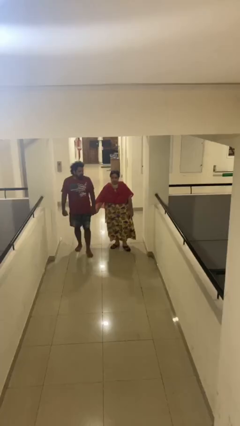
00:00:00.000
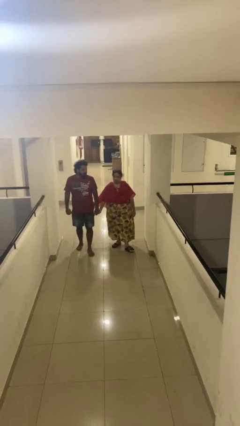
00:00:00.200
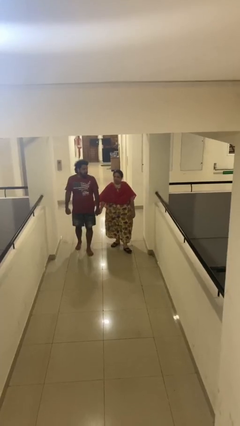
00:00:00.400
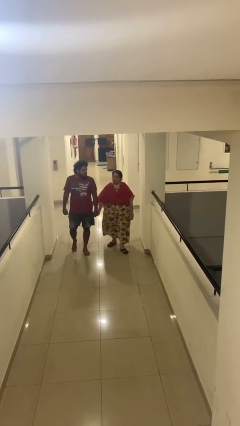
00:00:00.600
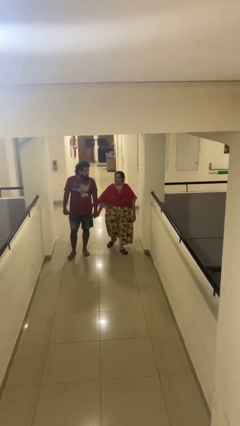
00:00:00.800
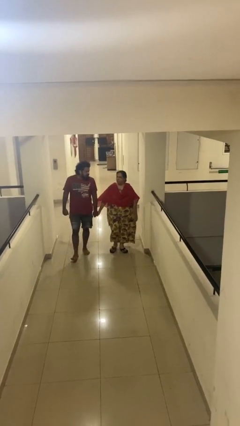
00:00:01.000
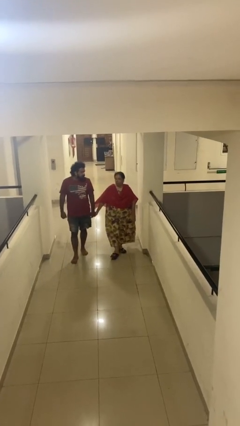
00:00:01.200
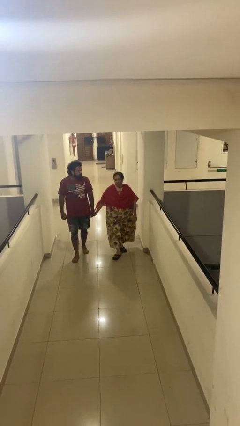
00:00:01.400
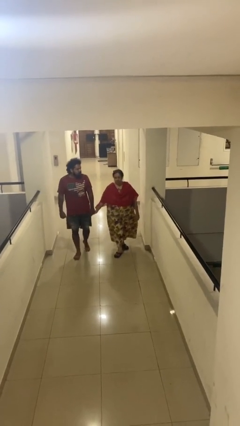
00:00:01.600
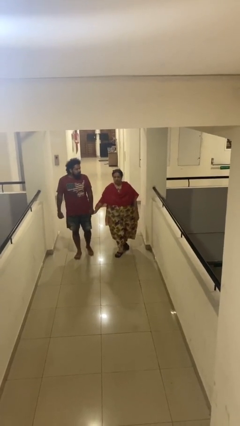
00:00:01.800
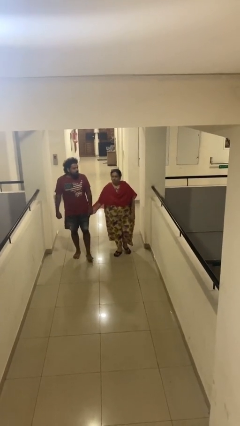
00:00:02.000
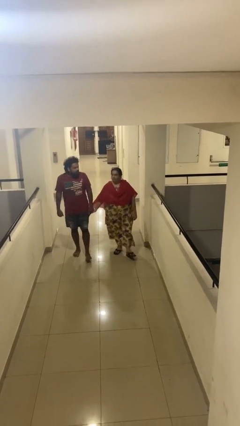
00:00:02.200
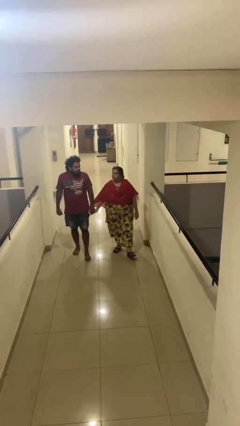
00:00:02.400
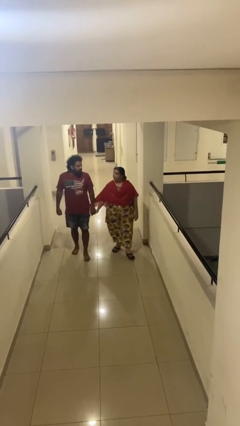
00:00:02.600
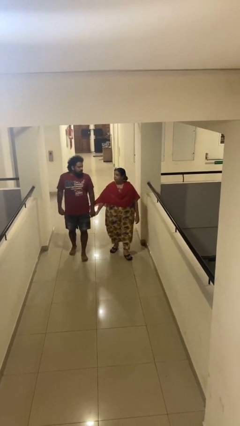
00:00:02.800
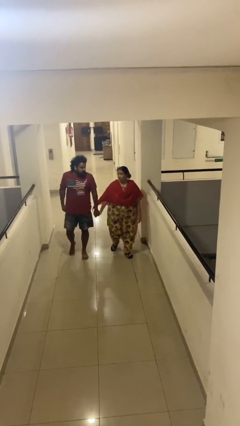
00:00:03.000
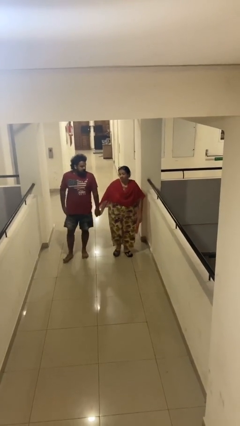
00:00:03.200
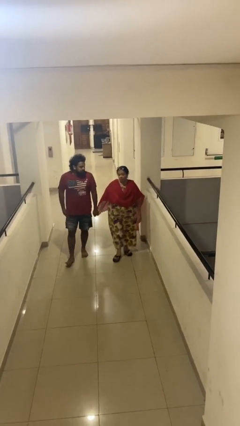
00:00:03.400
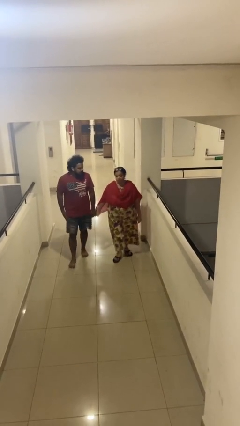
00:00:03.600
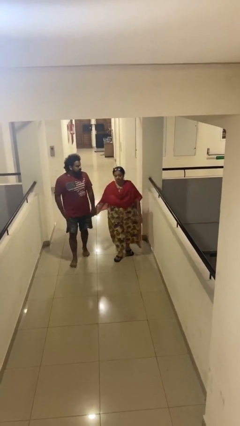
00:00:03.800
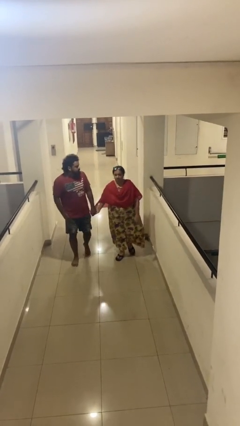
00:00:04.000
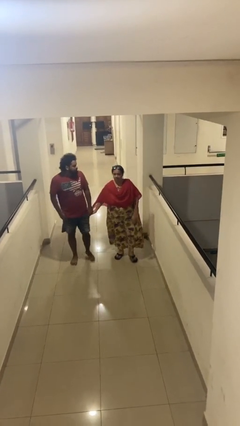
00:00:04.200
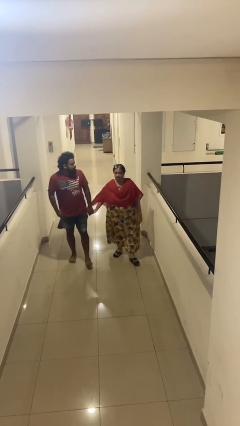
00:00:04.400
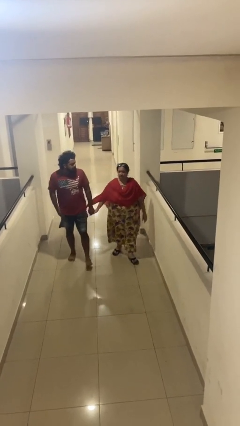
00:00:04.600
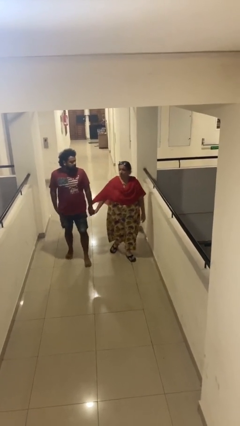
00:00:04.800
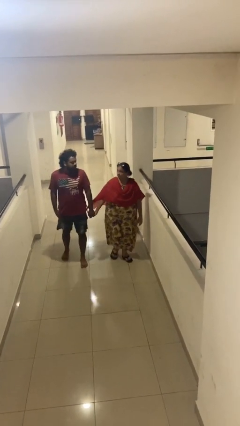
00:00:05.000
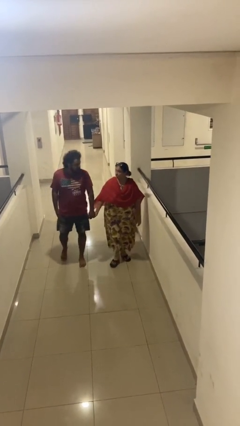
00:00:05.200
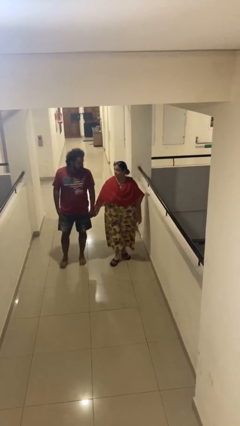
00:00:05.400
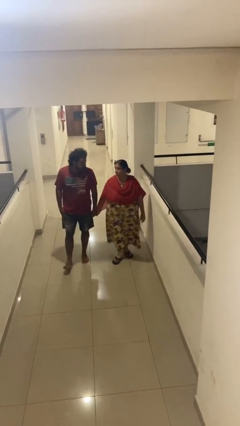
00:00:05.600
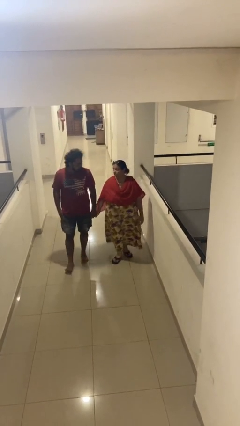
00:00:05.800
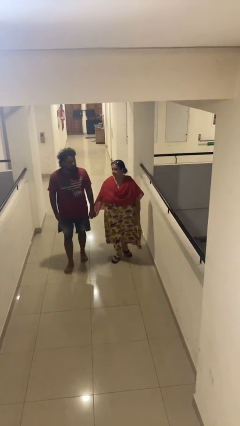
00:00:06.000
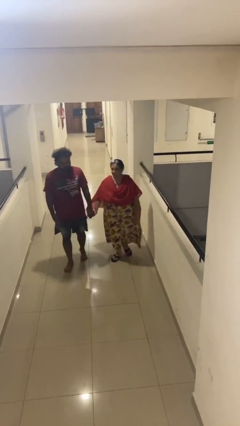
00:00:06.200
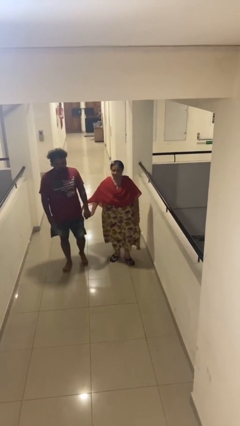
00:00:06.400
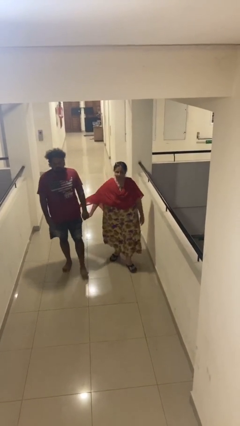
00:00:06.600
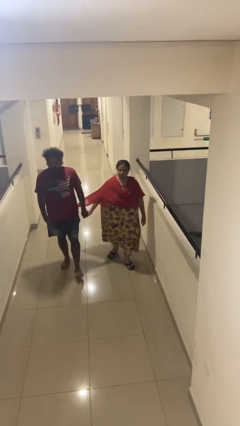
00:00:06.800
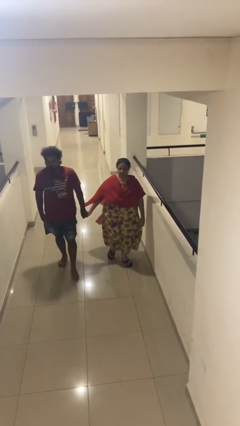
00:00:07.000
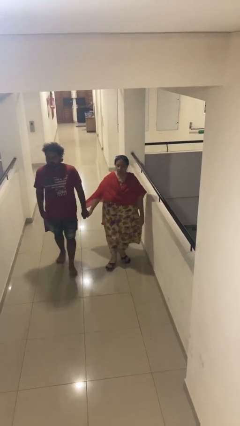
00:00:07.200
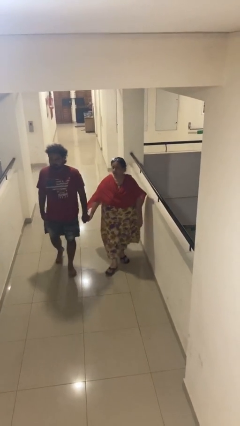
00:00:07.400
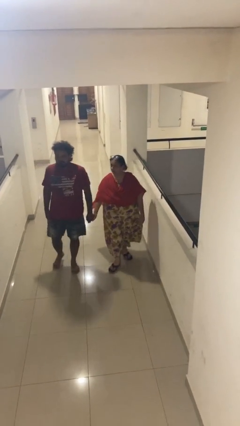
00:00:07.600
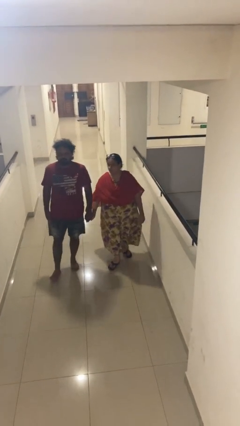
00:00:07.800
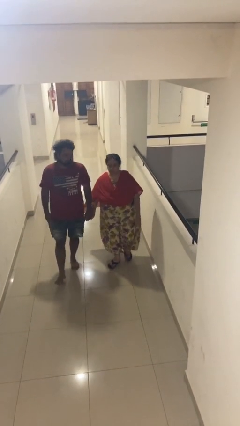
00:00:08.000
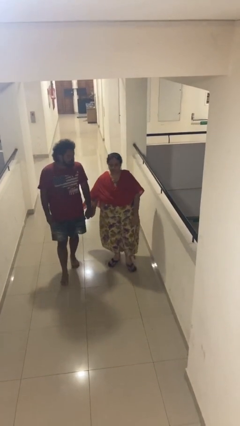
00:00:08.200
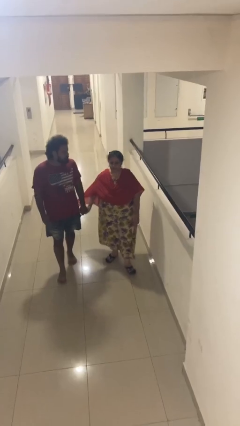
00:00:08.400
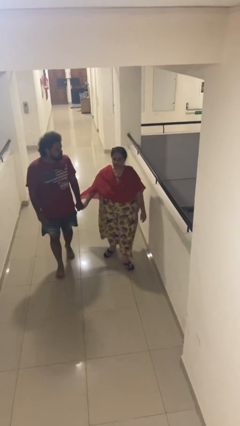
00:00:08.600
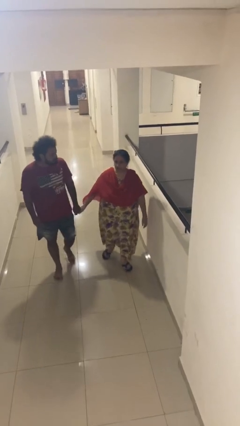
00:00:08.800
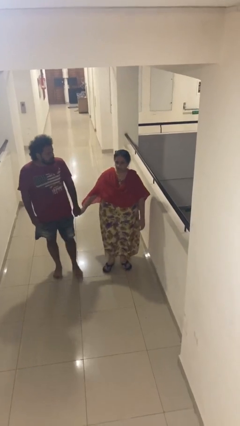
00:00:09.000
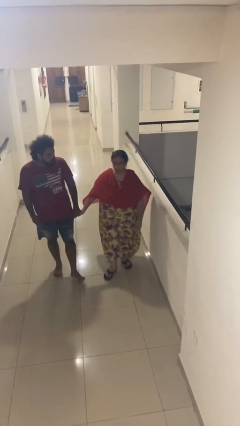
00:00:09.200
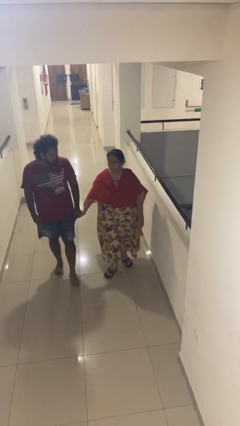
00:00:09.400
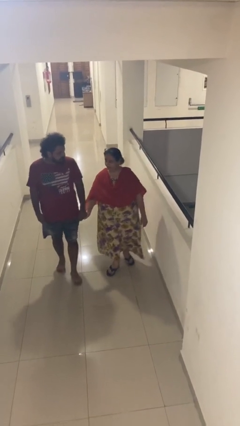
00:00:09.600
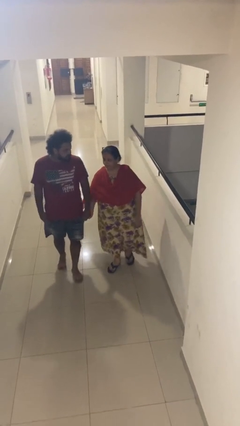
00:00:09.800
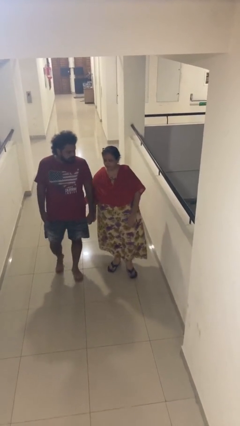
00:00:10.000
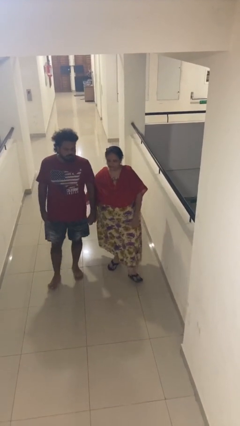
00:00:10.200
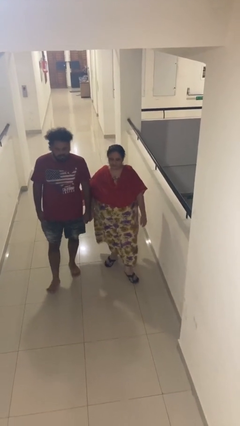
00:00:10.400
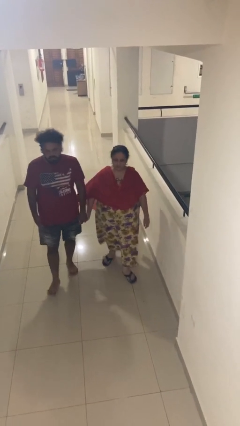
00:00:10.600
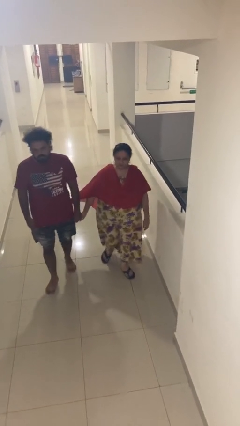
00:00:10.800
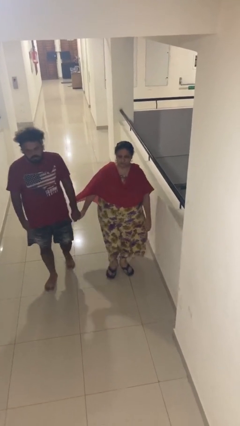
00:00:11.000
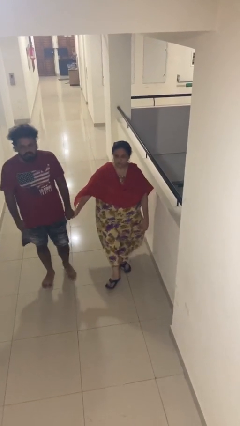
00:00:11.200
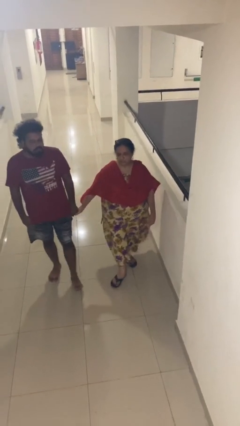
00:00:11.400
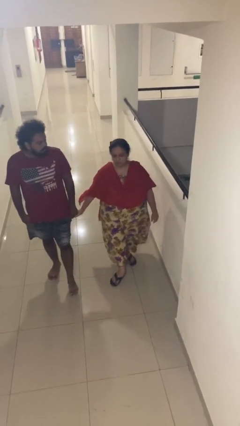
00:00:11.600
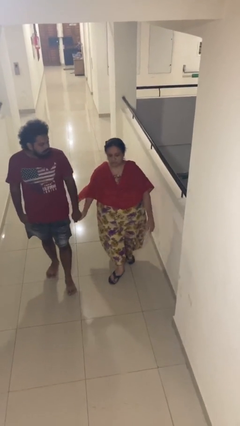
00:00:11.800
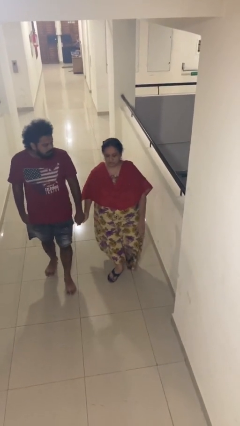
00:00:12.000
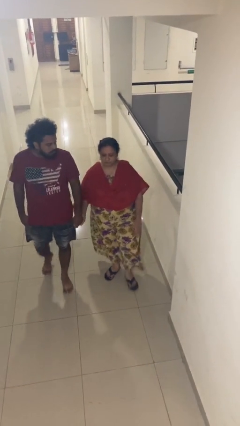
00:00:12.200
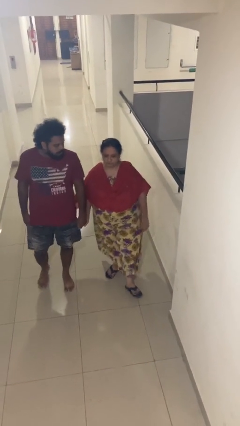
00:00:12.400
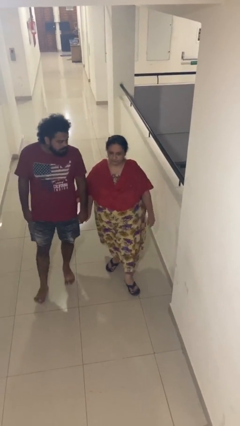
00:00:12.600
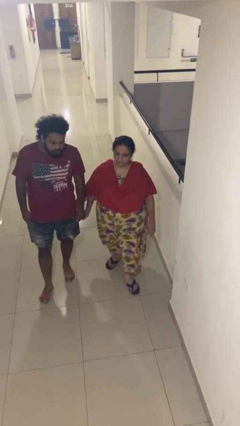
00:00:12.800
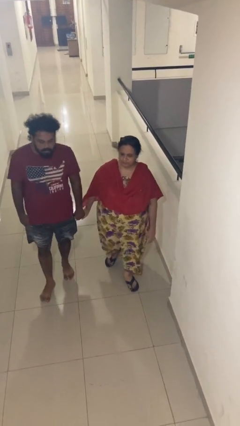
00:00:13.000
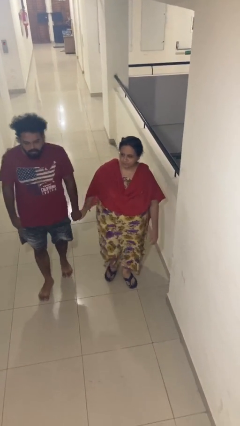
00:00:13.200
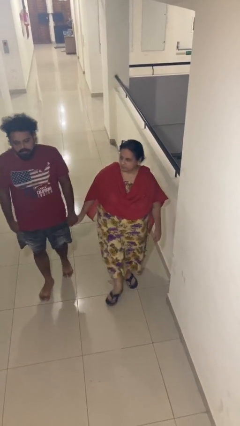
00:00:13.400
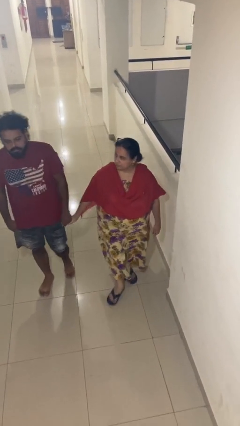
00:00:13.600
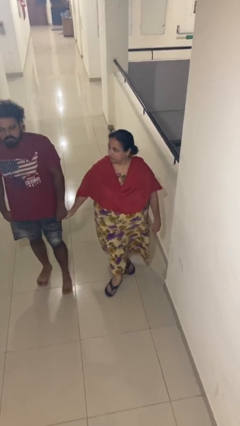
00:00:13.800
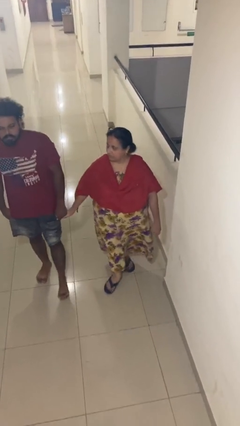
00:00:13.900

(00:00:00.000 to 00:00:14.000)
person holds hand

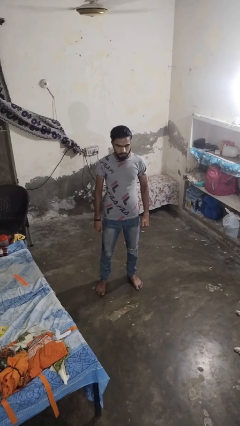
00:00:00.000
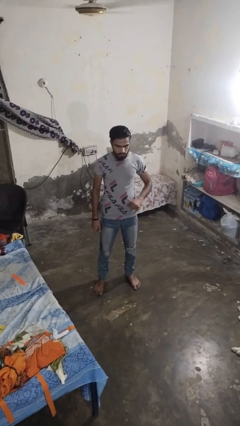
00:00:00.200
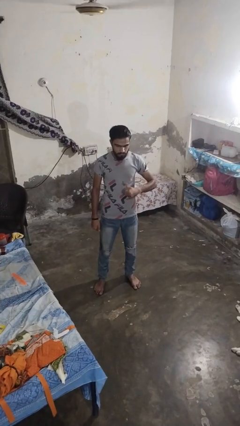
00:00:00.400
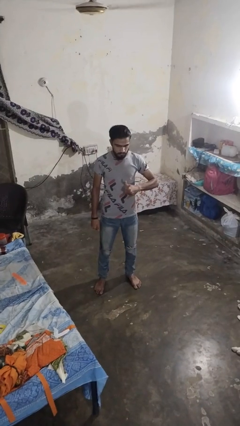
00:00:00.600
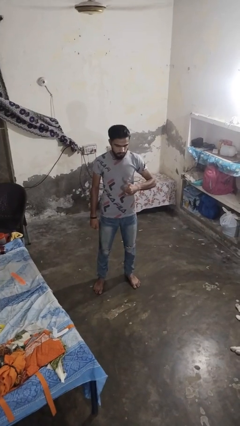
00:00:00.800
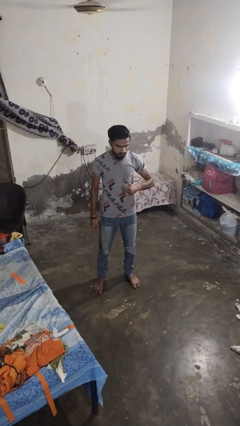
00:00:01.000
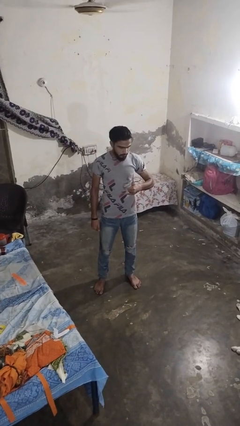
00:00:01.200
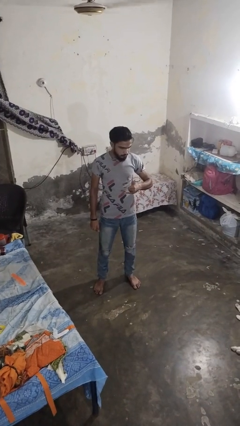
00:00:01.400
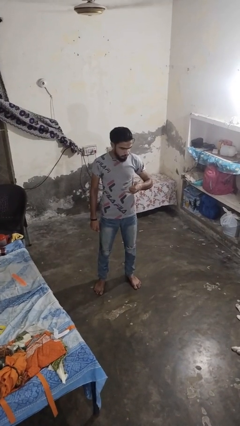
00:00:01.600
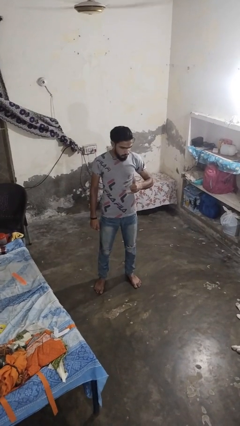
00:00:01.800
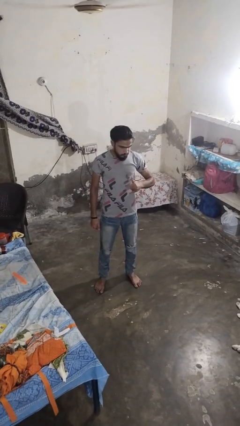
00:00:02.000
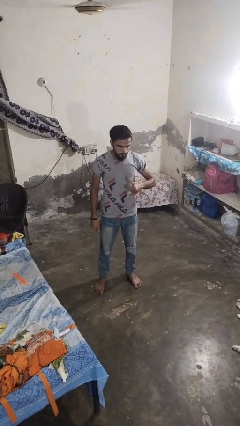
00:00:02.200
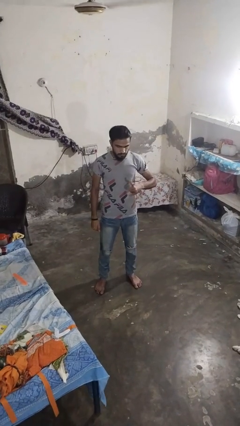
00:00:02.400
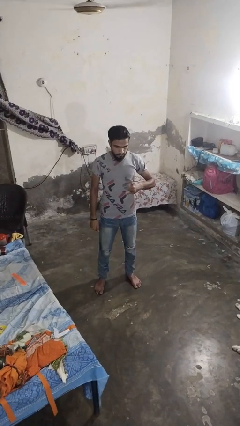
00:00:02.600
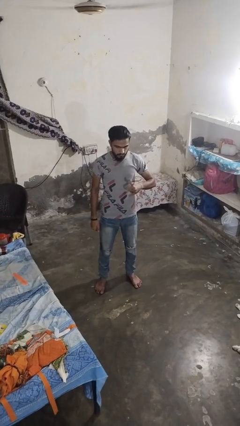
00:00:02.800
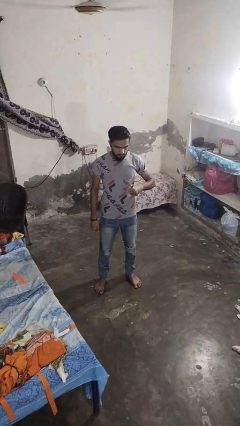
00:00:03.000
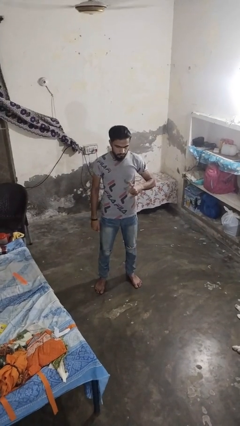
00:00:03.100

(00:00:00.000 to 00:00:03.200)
person gestures hang loose

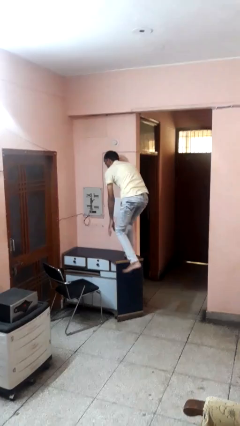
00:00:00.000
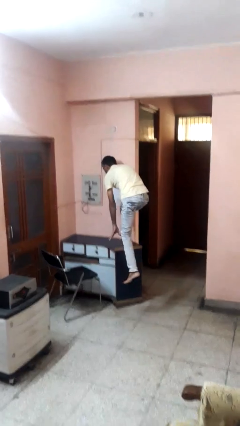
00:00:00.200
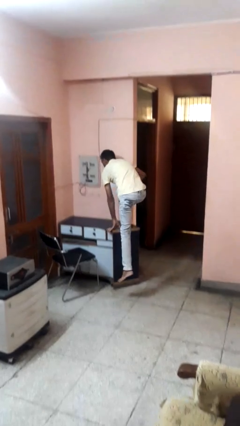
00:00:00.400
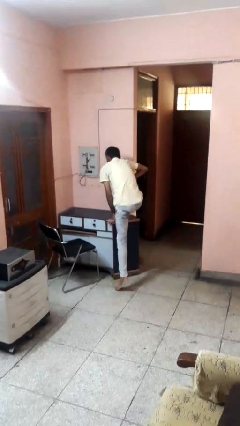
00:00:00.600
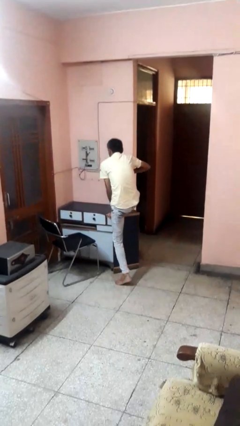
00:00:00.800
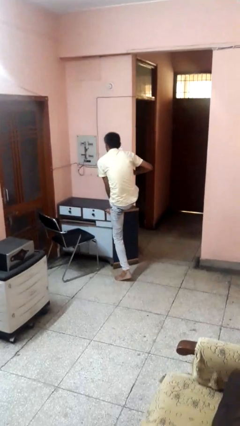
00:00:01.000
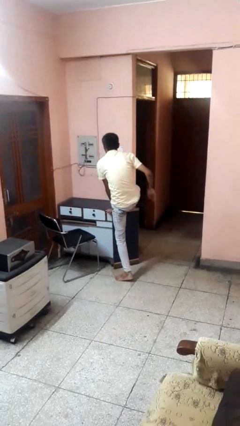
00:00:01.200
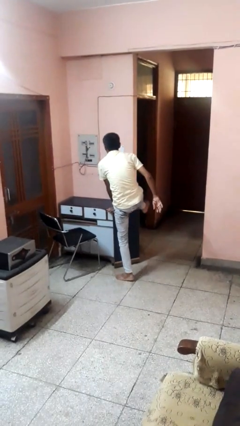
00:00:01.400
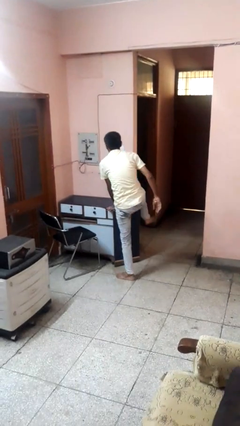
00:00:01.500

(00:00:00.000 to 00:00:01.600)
person climbs off table
